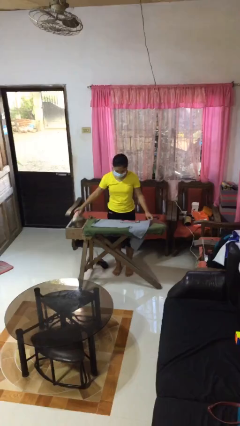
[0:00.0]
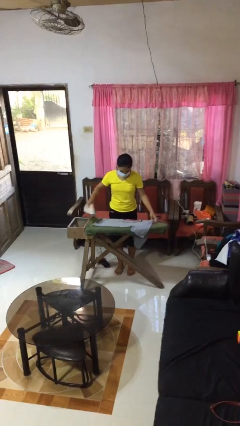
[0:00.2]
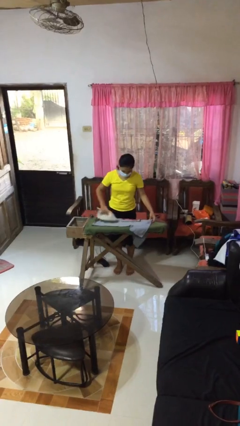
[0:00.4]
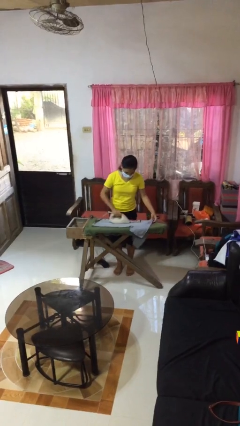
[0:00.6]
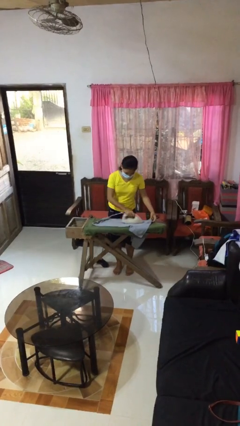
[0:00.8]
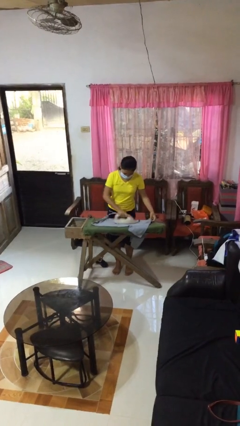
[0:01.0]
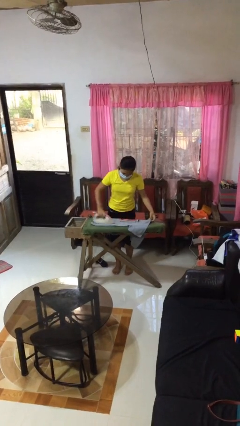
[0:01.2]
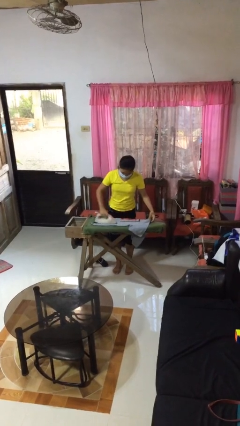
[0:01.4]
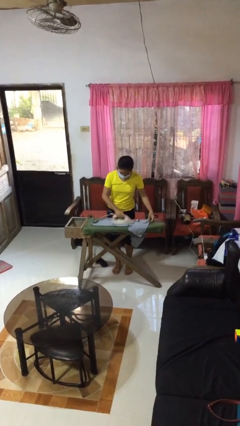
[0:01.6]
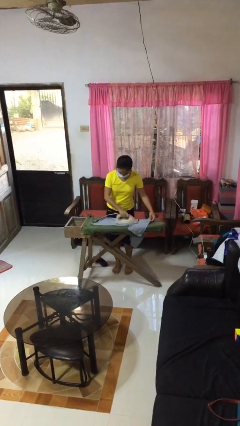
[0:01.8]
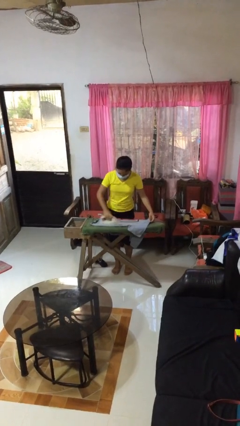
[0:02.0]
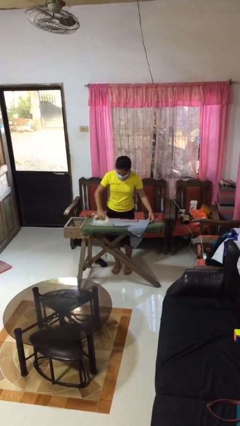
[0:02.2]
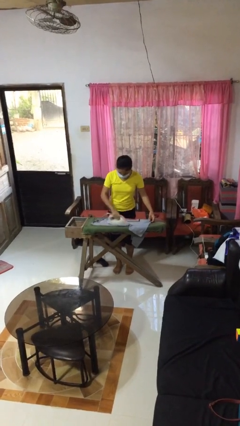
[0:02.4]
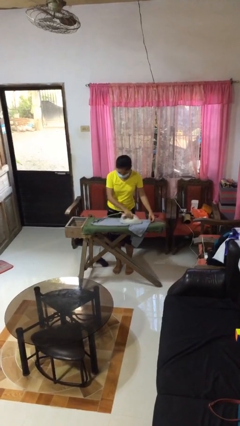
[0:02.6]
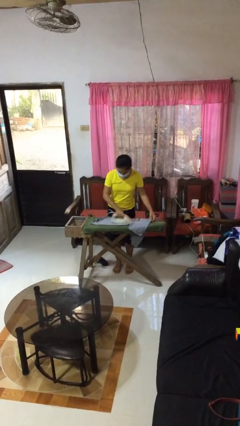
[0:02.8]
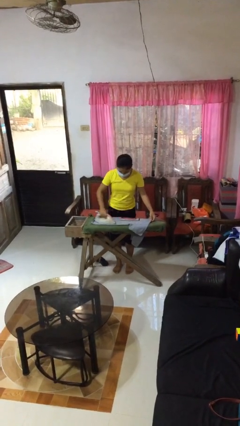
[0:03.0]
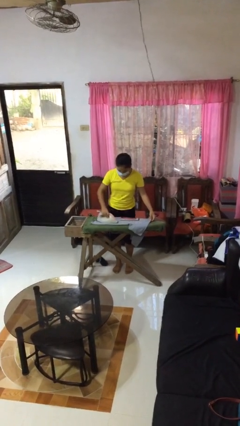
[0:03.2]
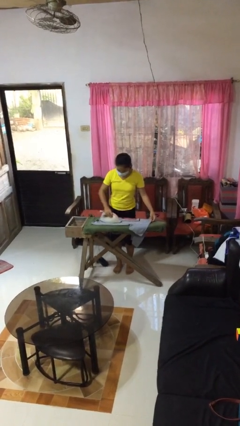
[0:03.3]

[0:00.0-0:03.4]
person irons clothes

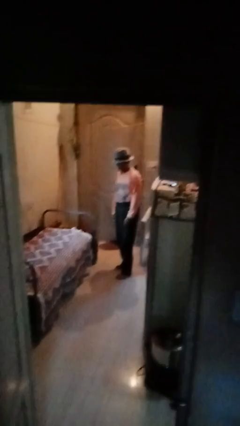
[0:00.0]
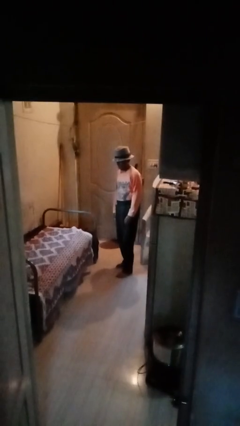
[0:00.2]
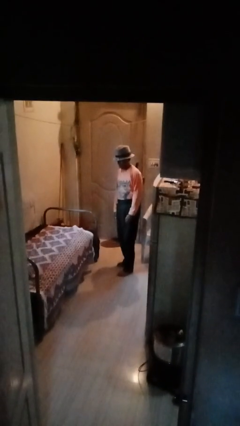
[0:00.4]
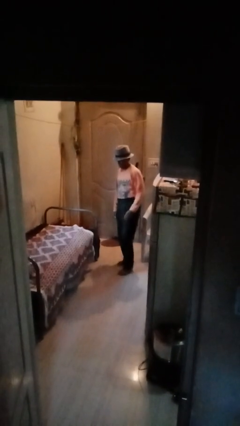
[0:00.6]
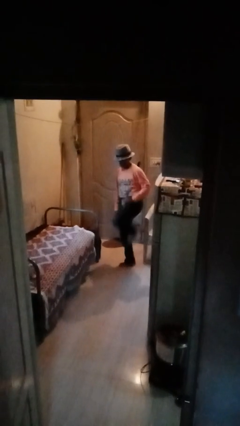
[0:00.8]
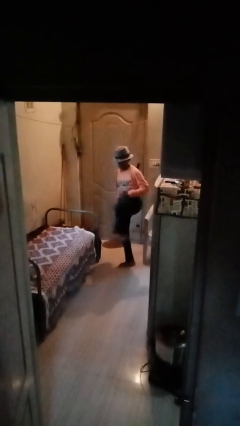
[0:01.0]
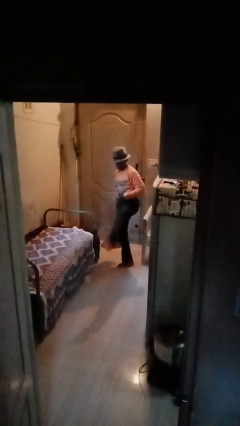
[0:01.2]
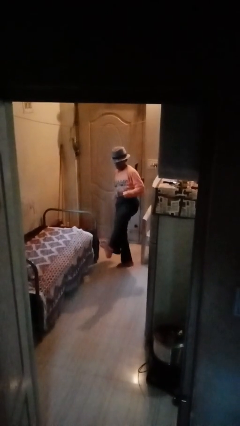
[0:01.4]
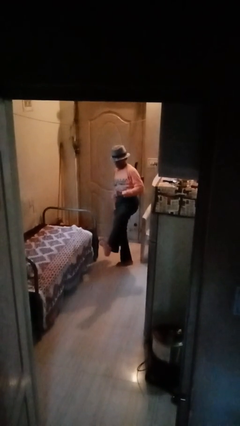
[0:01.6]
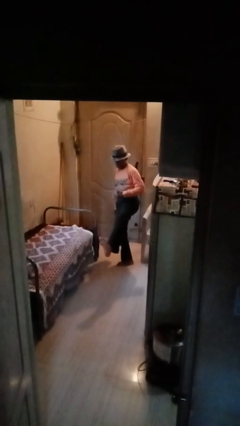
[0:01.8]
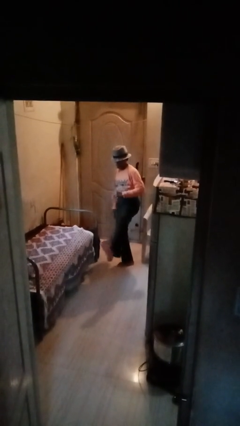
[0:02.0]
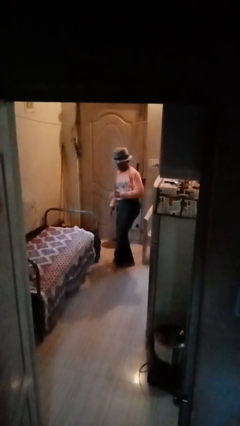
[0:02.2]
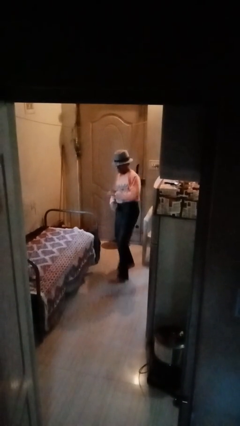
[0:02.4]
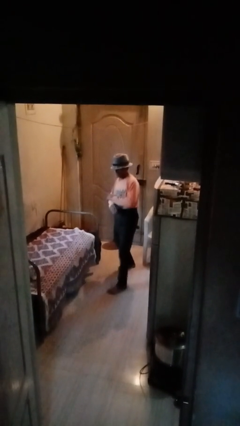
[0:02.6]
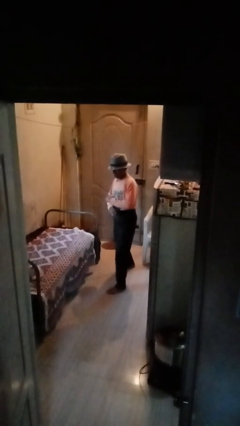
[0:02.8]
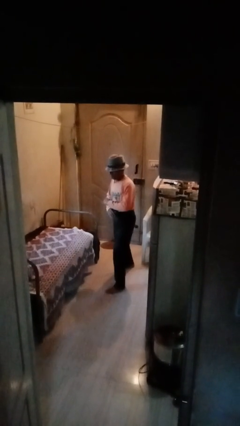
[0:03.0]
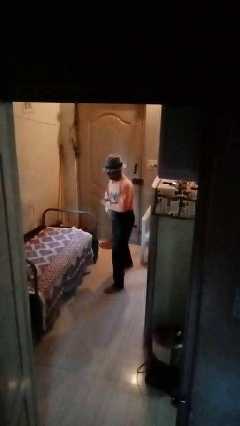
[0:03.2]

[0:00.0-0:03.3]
person karate kicks

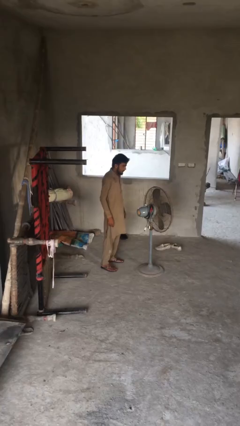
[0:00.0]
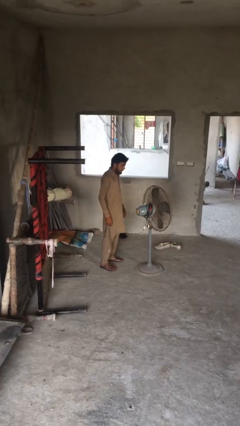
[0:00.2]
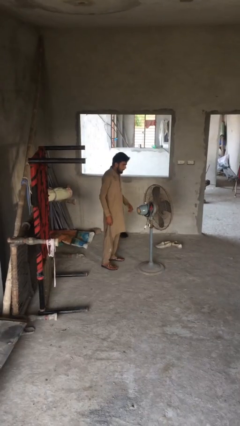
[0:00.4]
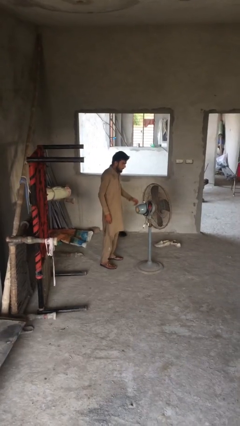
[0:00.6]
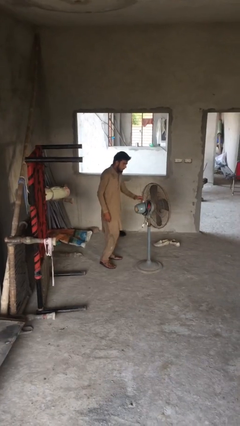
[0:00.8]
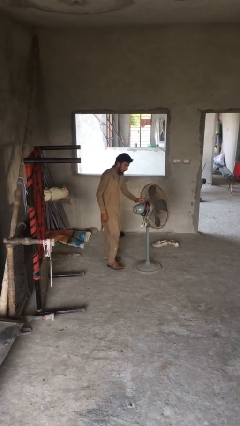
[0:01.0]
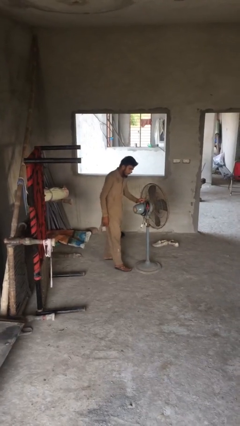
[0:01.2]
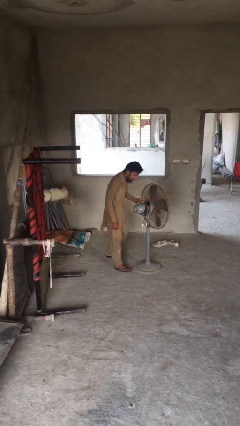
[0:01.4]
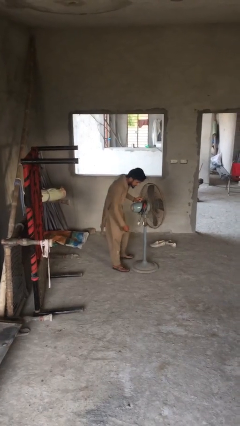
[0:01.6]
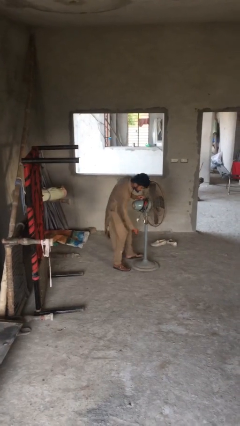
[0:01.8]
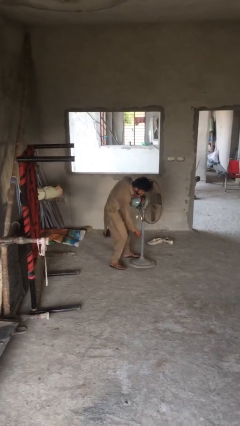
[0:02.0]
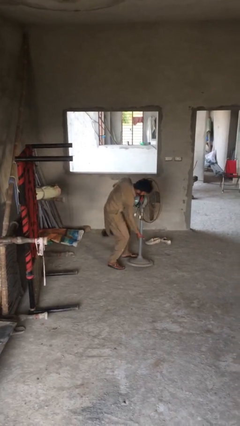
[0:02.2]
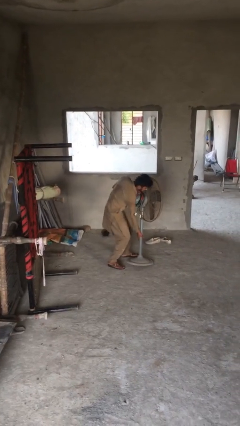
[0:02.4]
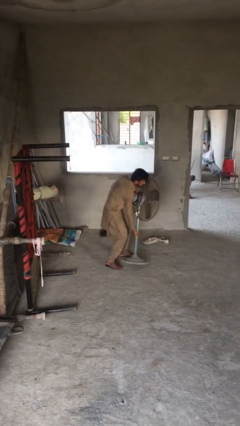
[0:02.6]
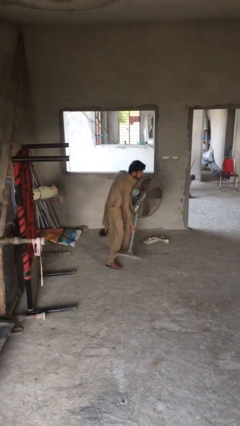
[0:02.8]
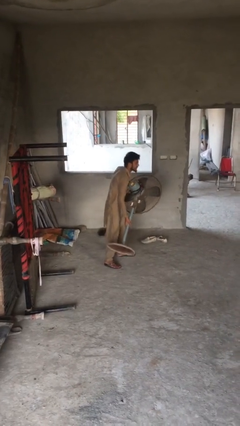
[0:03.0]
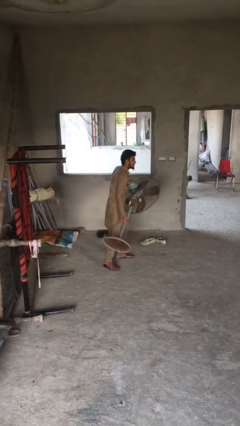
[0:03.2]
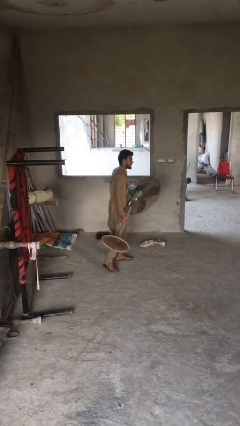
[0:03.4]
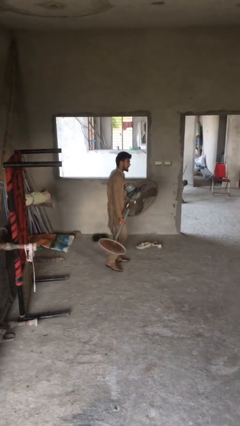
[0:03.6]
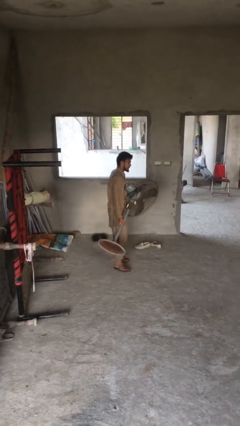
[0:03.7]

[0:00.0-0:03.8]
person picks up object from floor

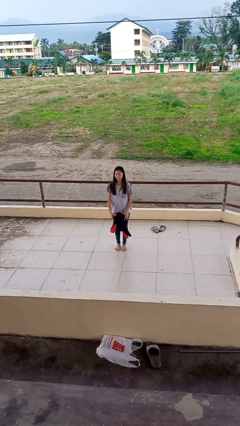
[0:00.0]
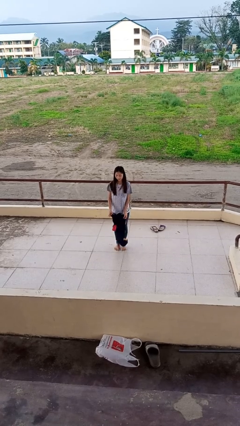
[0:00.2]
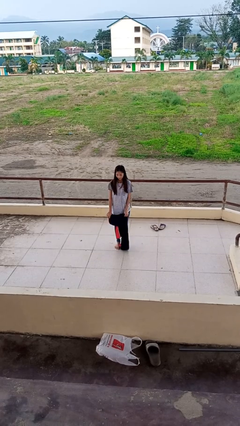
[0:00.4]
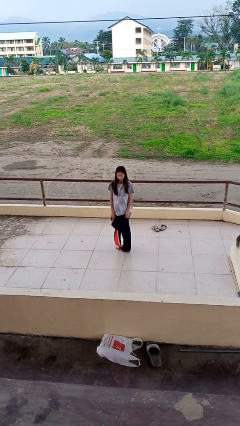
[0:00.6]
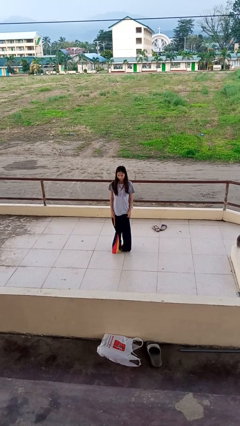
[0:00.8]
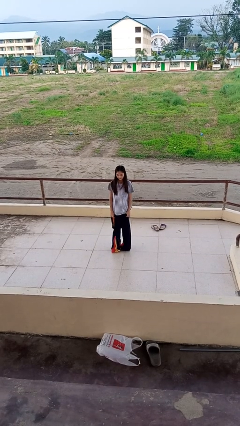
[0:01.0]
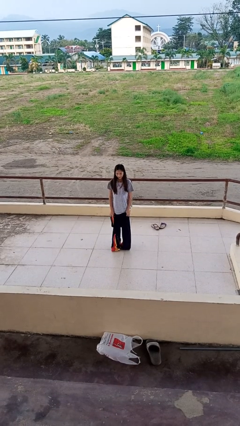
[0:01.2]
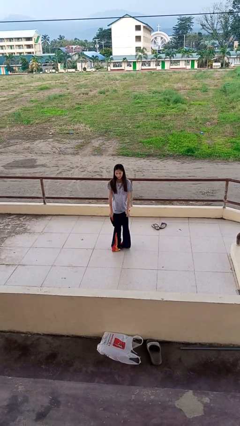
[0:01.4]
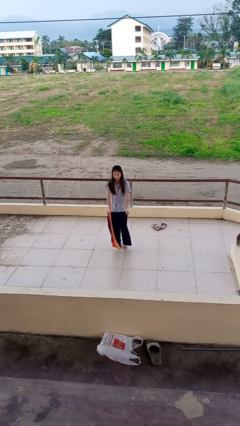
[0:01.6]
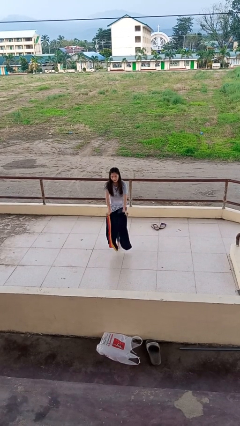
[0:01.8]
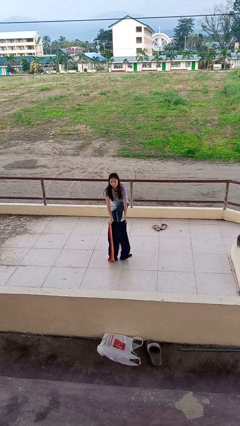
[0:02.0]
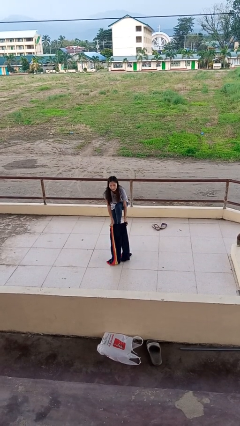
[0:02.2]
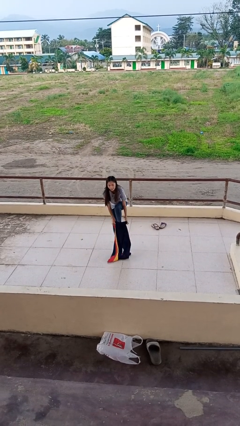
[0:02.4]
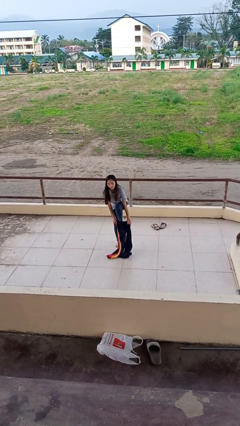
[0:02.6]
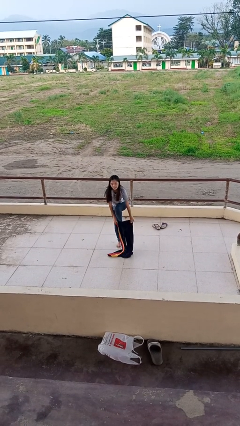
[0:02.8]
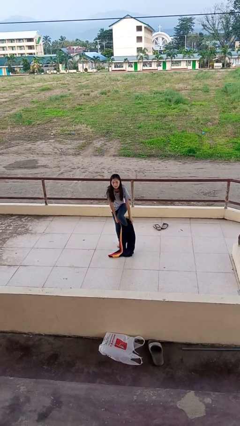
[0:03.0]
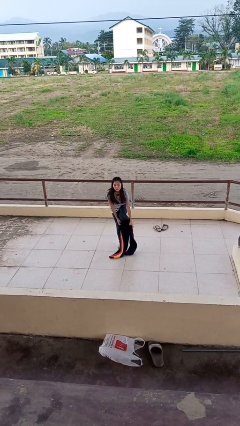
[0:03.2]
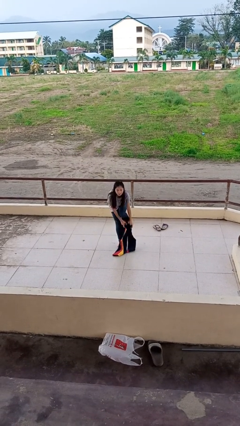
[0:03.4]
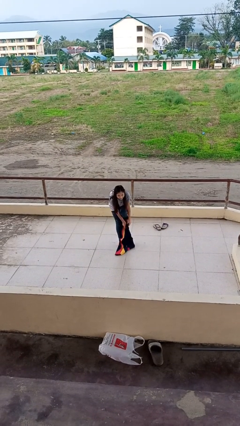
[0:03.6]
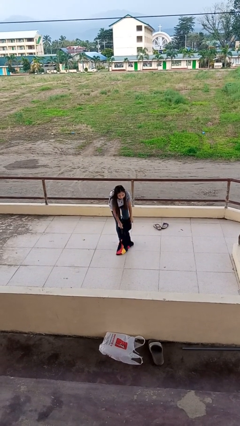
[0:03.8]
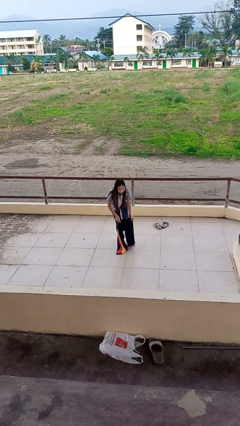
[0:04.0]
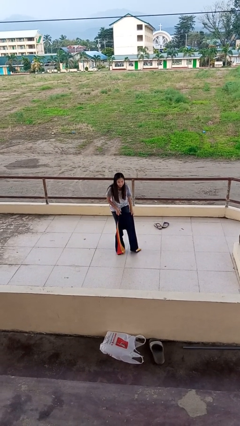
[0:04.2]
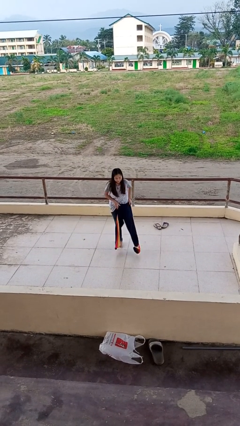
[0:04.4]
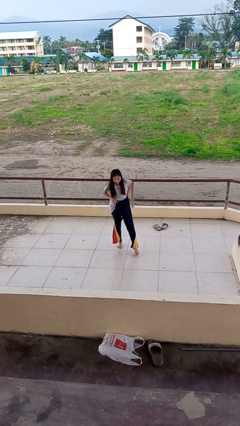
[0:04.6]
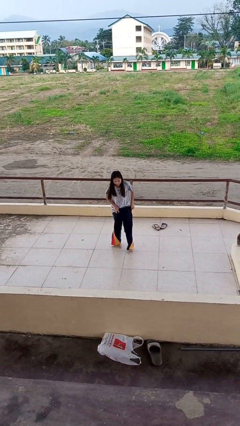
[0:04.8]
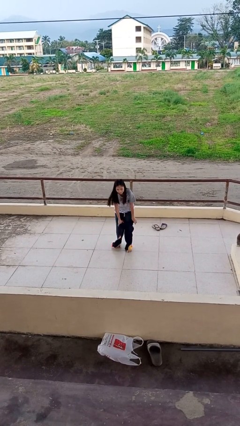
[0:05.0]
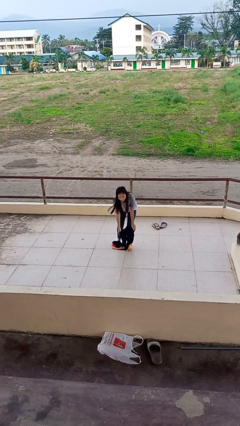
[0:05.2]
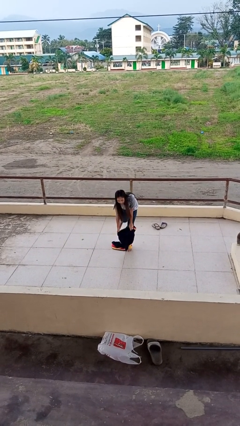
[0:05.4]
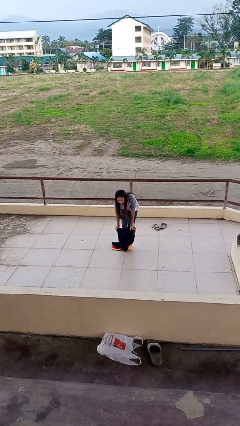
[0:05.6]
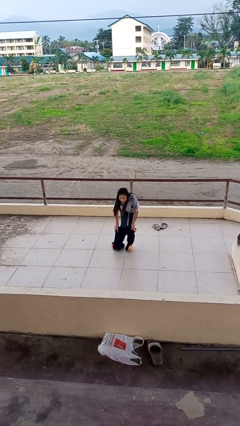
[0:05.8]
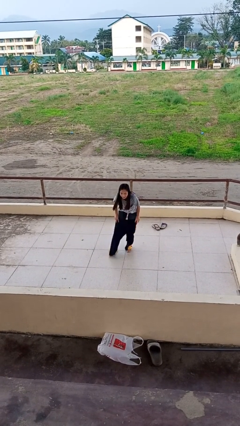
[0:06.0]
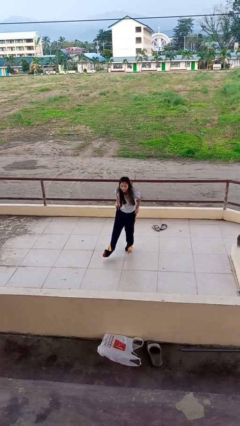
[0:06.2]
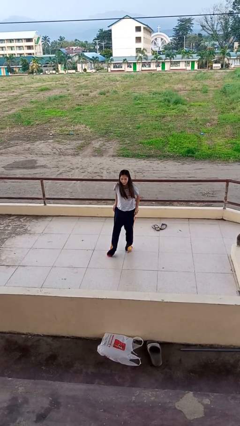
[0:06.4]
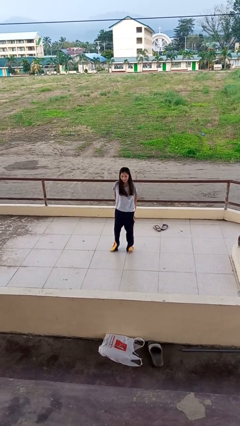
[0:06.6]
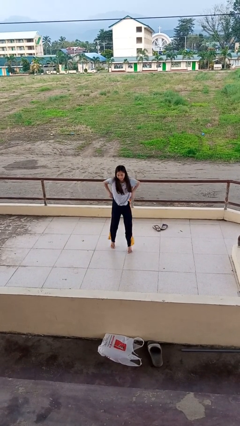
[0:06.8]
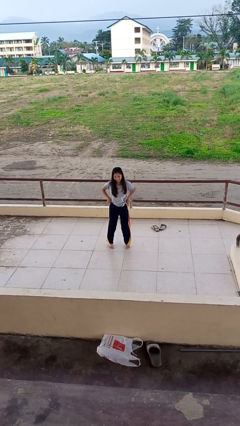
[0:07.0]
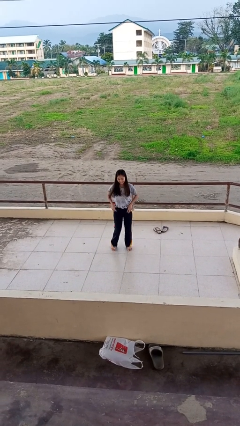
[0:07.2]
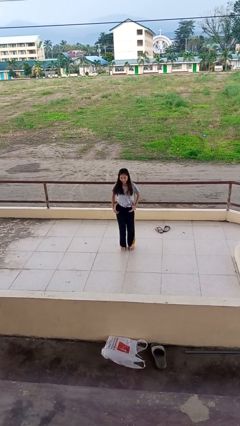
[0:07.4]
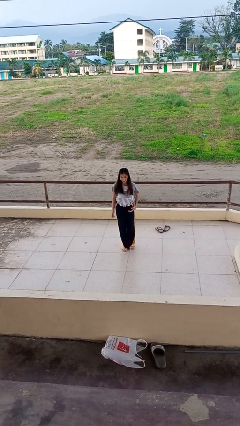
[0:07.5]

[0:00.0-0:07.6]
person puts on pants
